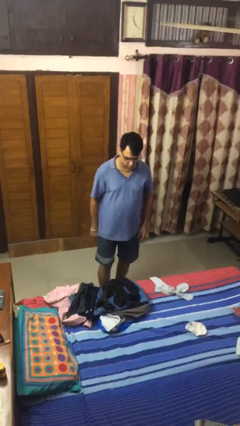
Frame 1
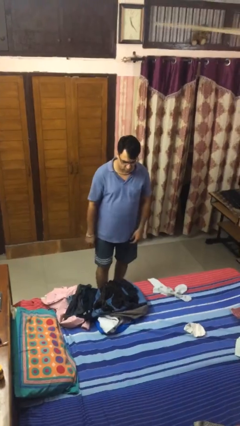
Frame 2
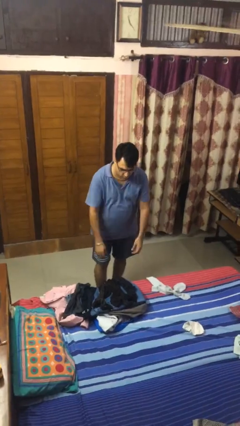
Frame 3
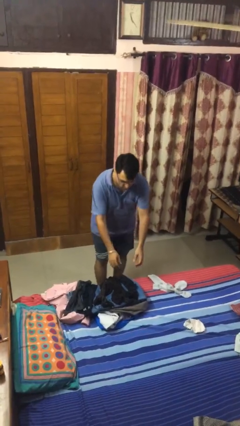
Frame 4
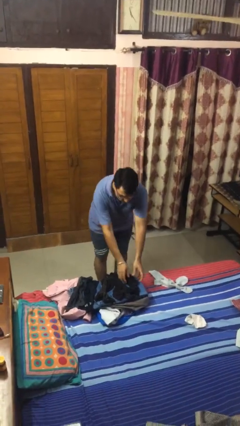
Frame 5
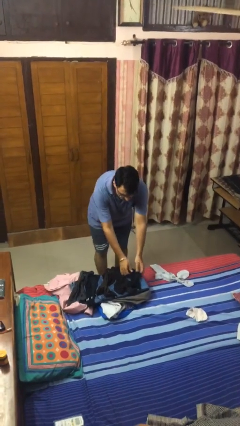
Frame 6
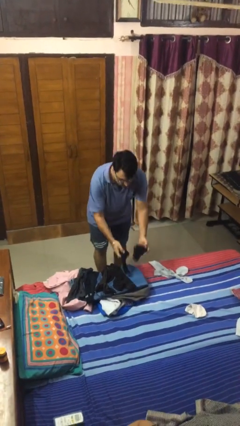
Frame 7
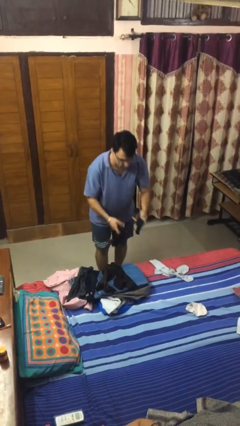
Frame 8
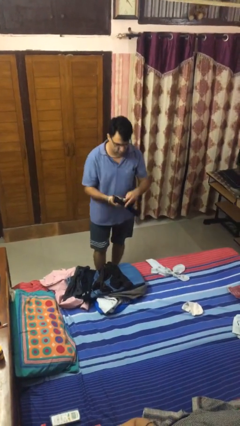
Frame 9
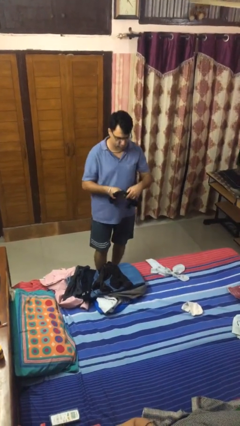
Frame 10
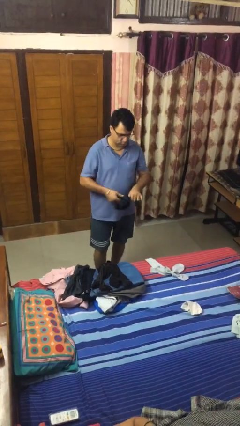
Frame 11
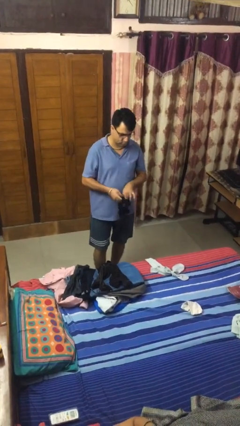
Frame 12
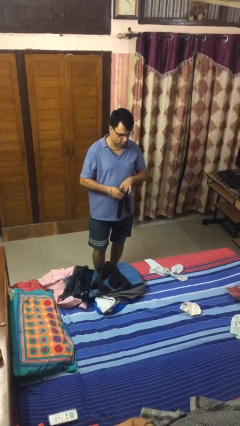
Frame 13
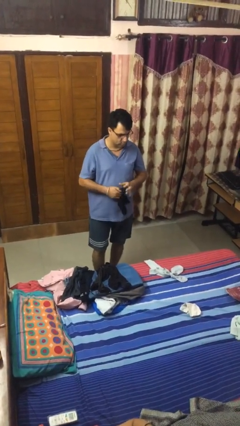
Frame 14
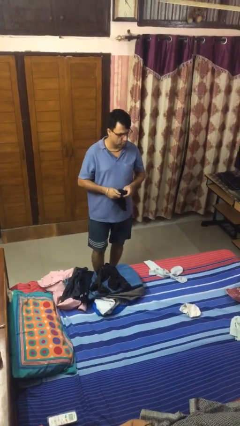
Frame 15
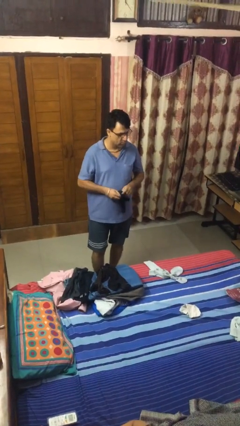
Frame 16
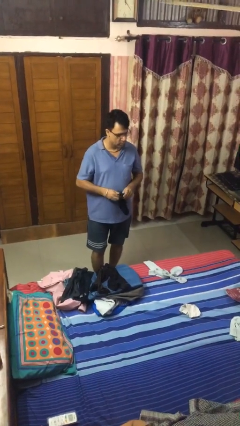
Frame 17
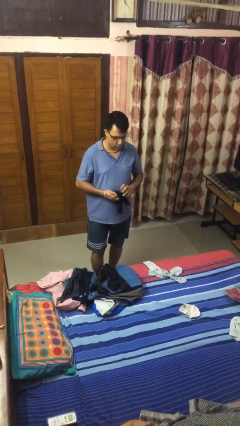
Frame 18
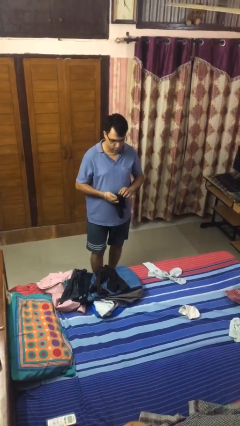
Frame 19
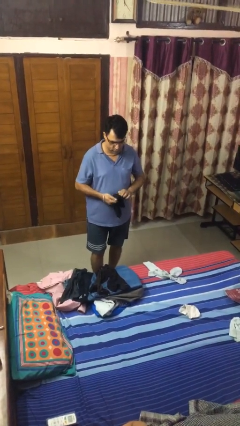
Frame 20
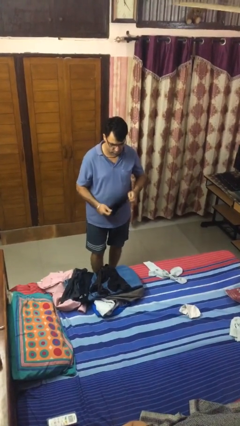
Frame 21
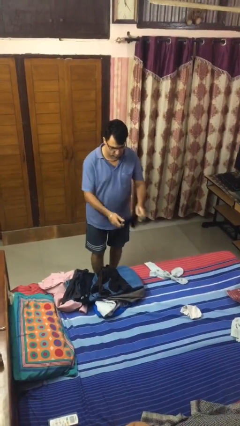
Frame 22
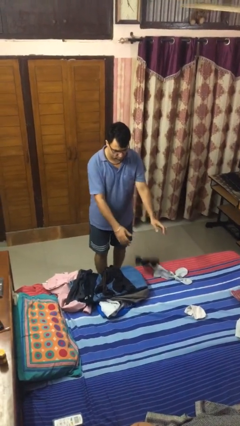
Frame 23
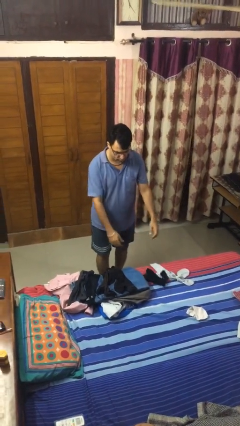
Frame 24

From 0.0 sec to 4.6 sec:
person folds socks

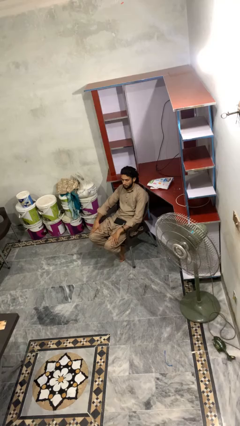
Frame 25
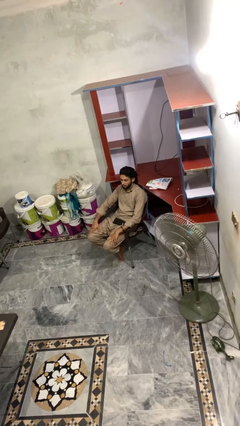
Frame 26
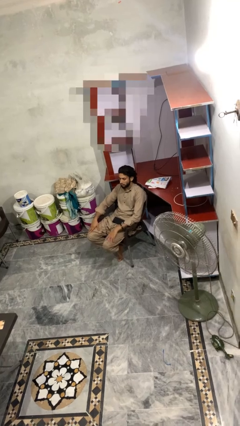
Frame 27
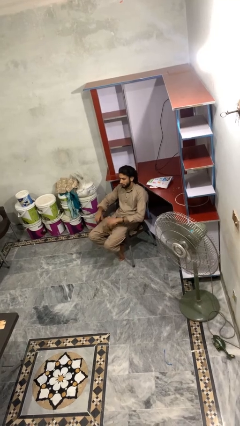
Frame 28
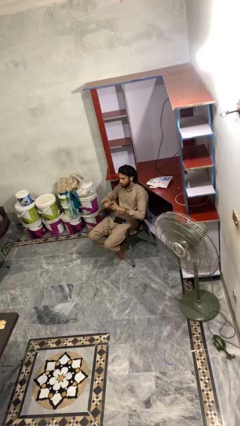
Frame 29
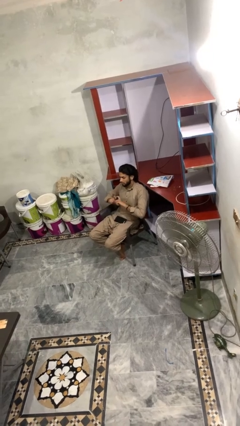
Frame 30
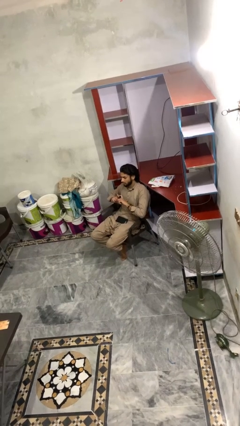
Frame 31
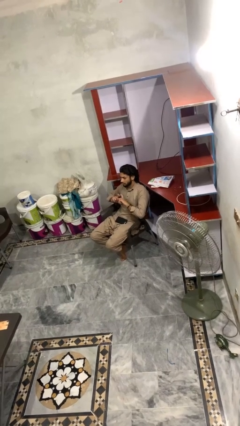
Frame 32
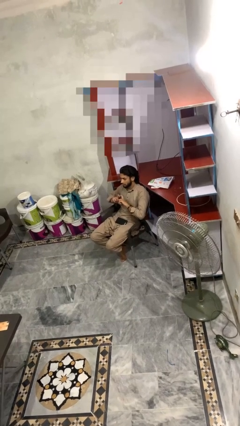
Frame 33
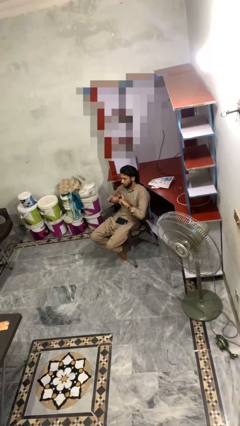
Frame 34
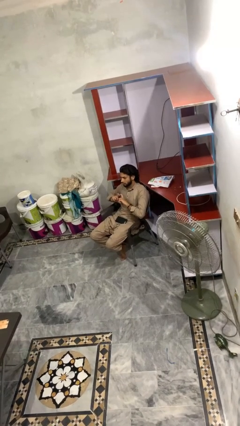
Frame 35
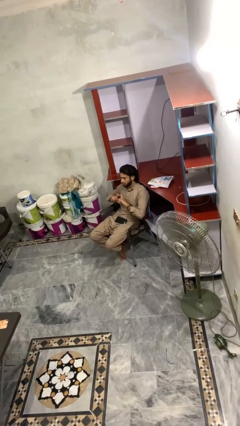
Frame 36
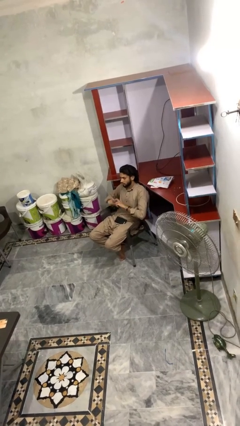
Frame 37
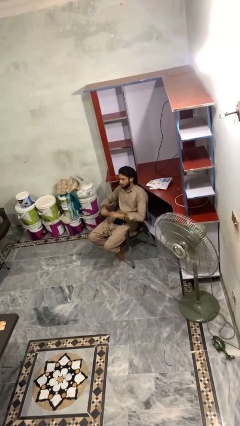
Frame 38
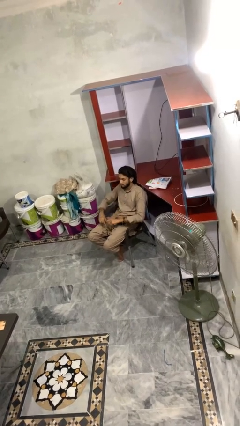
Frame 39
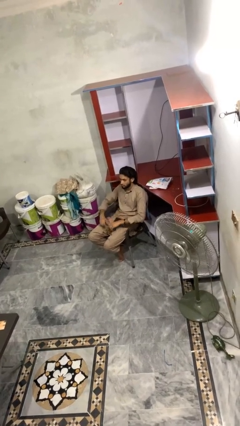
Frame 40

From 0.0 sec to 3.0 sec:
person gestures heart

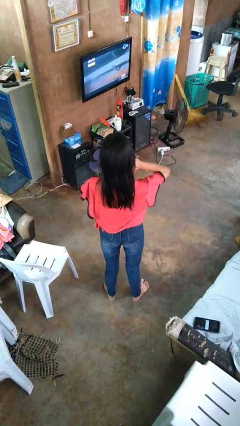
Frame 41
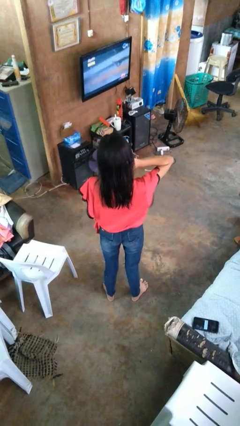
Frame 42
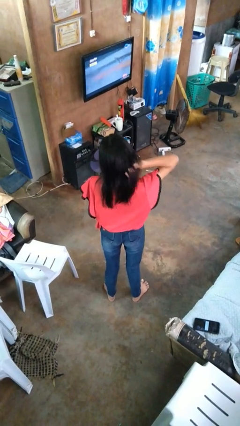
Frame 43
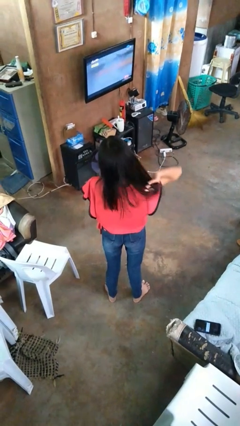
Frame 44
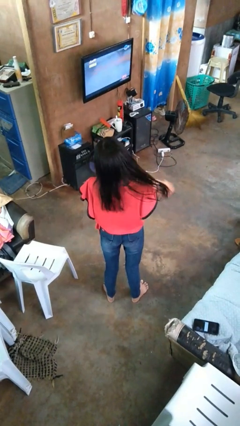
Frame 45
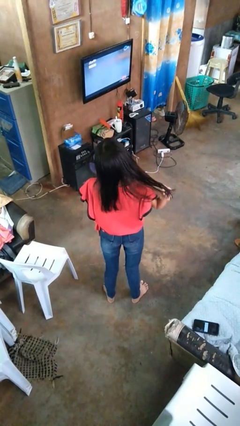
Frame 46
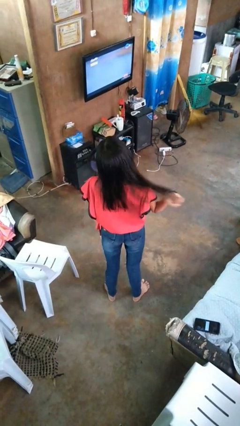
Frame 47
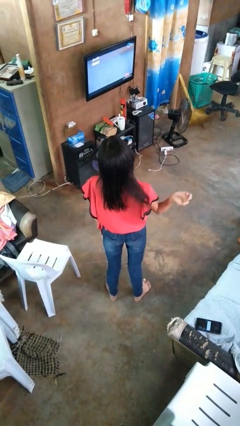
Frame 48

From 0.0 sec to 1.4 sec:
person strokes hair

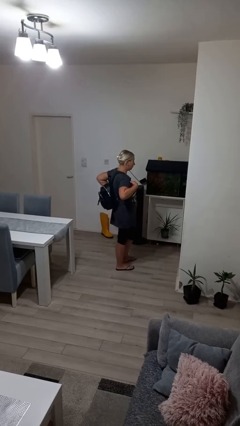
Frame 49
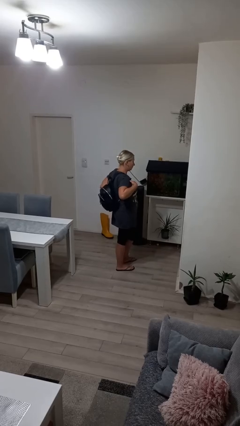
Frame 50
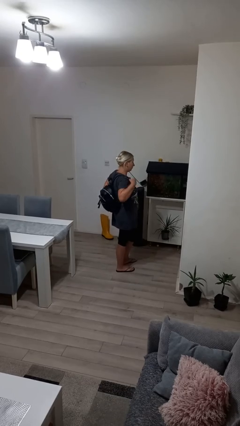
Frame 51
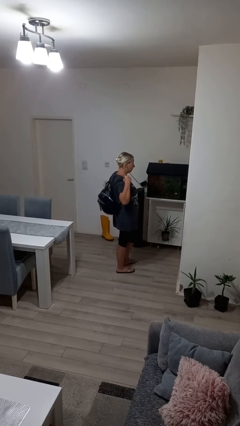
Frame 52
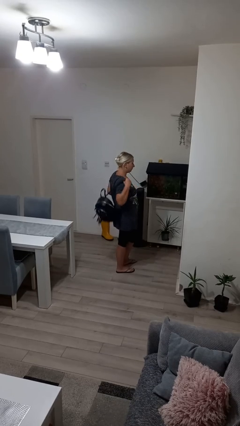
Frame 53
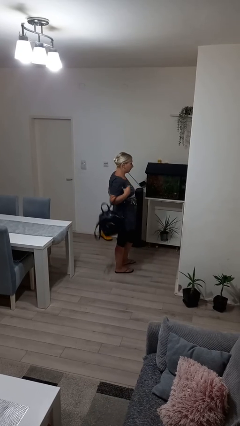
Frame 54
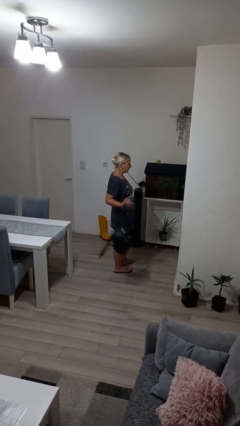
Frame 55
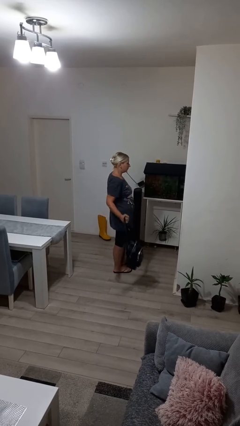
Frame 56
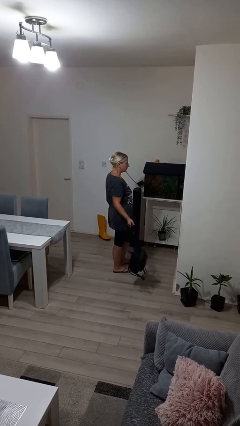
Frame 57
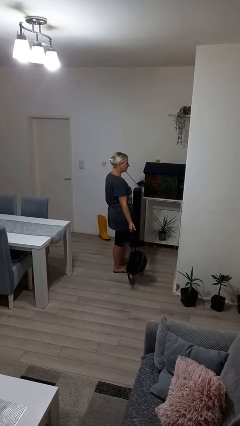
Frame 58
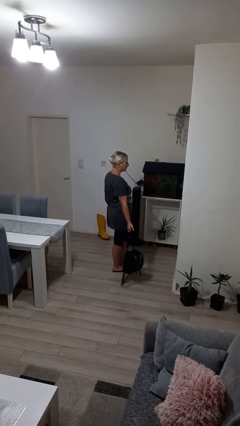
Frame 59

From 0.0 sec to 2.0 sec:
person takes off backpack

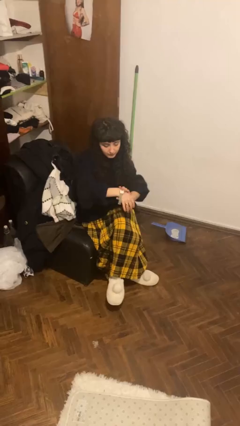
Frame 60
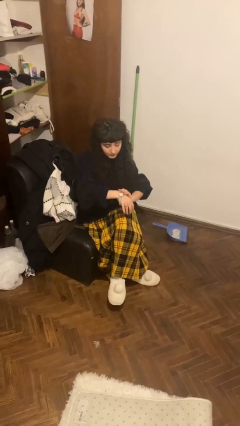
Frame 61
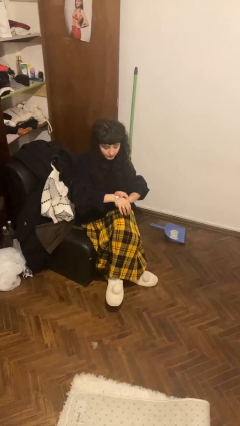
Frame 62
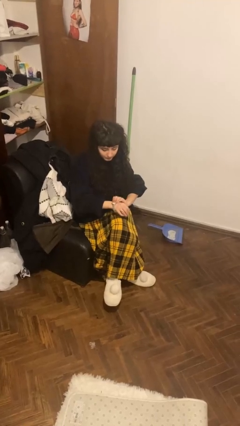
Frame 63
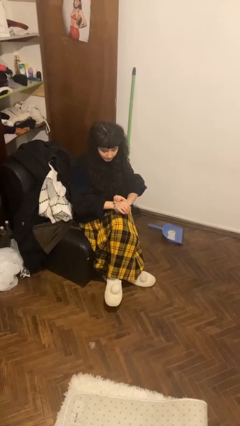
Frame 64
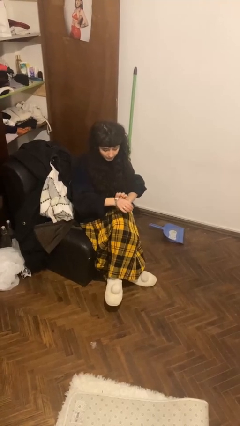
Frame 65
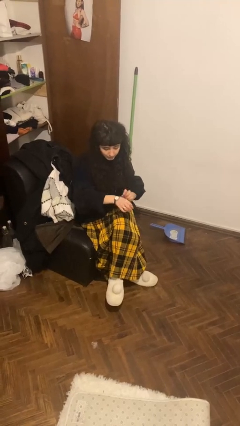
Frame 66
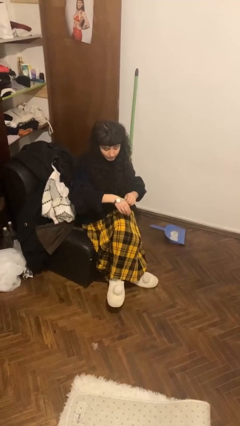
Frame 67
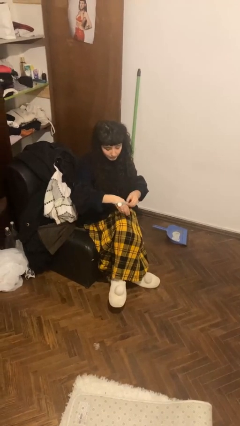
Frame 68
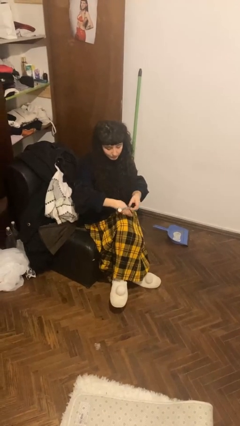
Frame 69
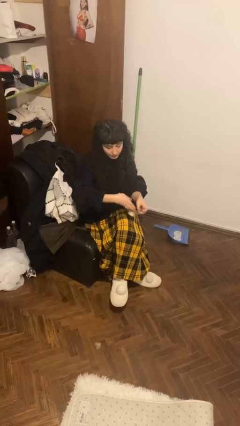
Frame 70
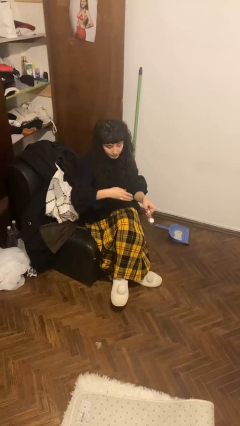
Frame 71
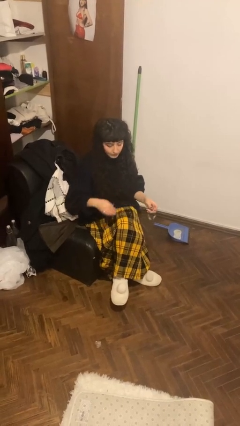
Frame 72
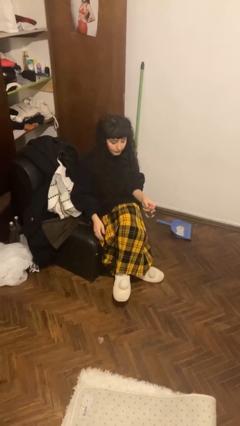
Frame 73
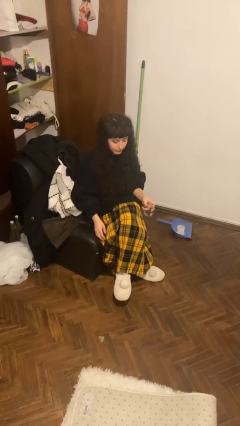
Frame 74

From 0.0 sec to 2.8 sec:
person takes off wristwatch

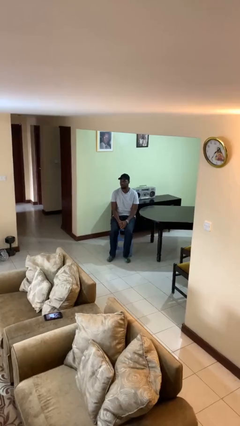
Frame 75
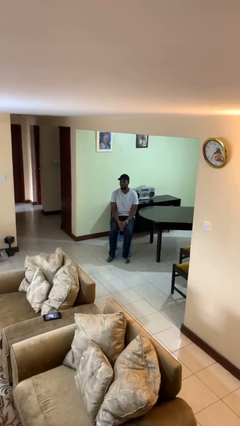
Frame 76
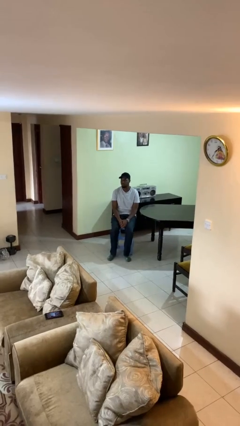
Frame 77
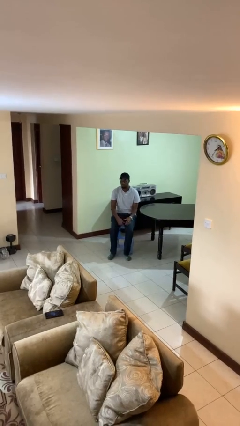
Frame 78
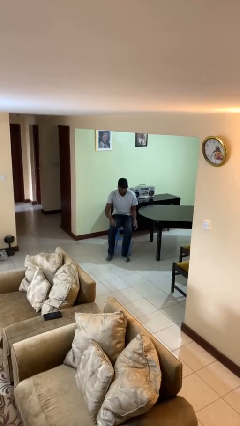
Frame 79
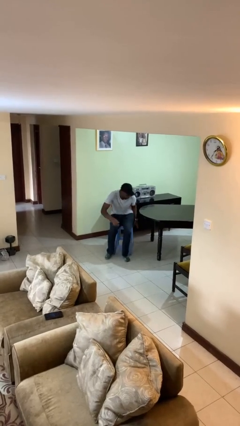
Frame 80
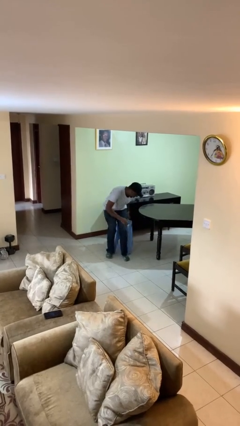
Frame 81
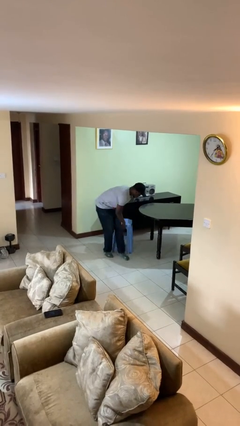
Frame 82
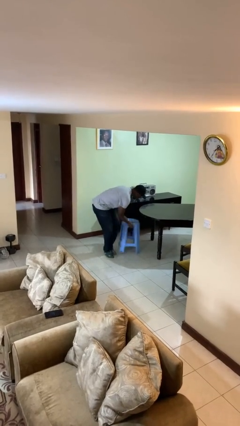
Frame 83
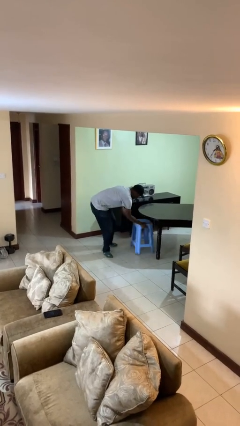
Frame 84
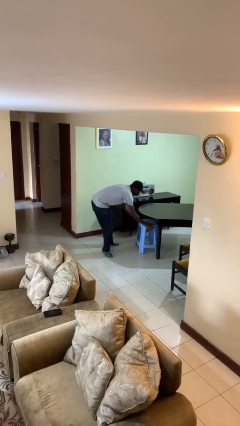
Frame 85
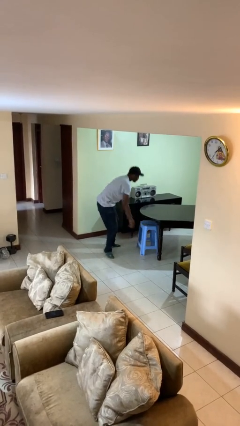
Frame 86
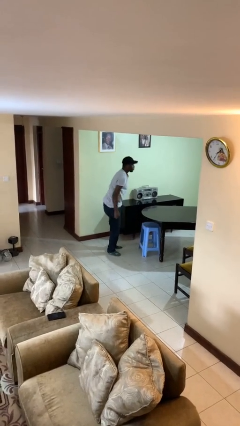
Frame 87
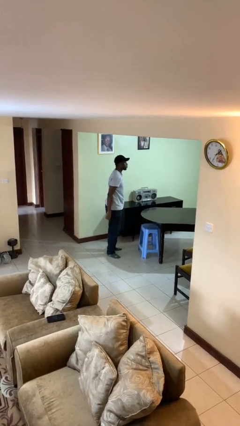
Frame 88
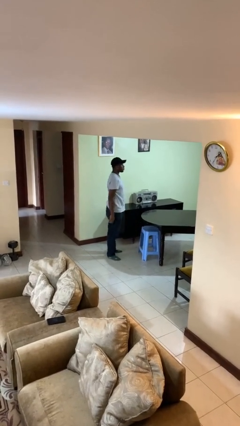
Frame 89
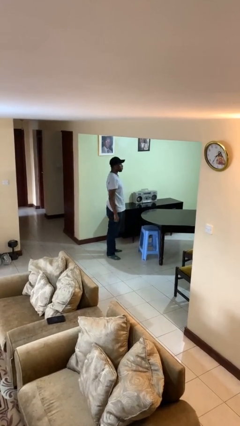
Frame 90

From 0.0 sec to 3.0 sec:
person stands up

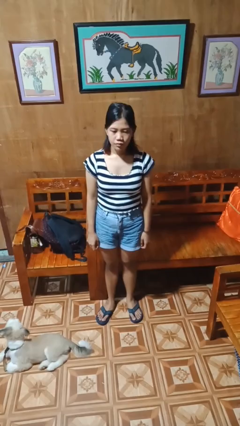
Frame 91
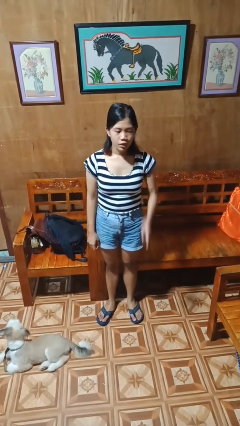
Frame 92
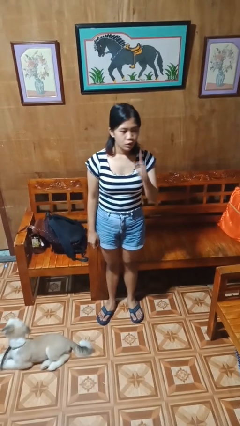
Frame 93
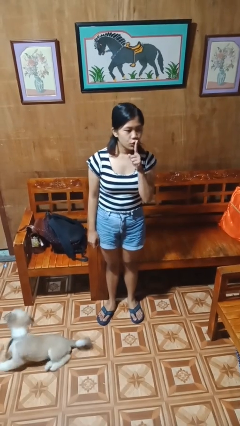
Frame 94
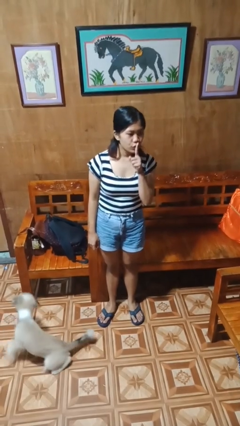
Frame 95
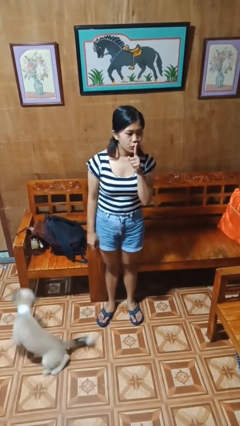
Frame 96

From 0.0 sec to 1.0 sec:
person gestures be quiet
